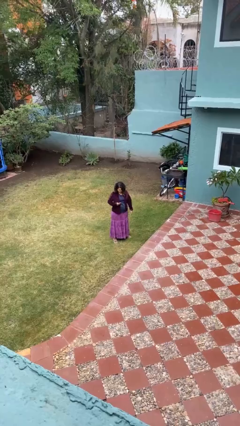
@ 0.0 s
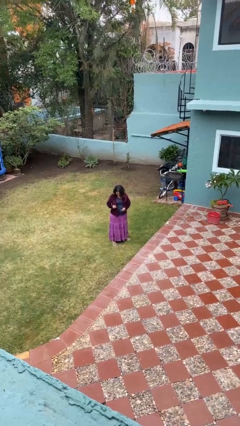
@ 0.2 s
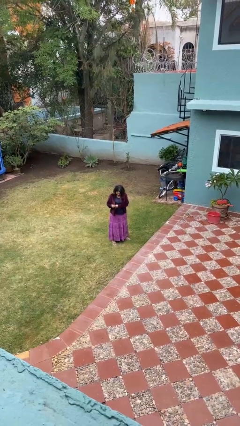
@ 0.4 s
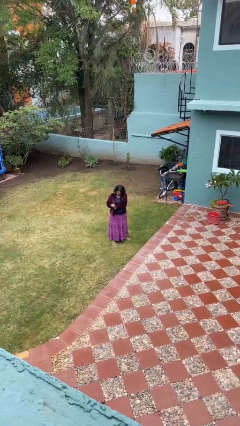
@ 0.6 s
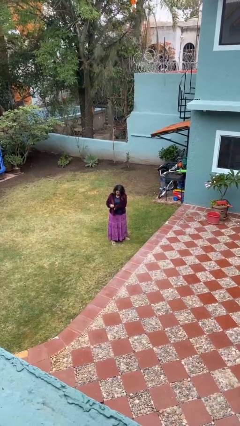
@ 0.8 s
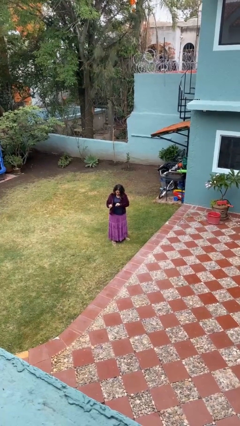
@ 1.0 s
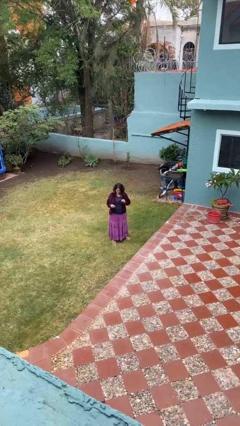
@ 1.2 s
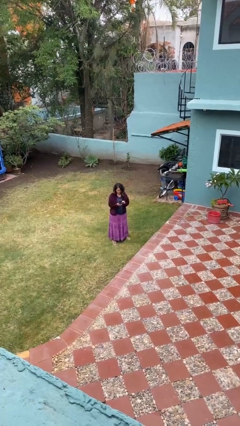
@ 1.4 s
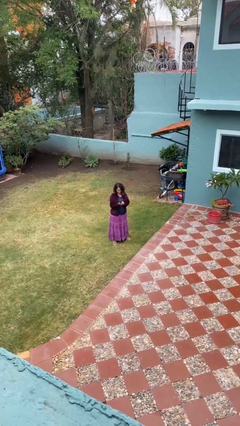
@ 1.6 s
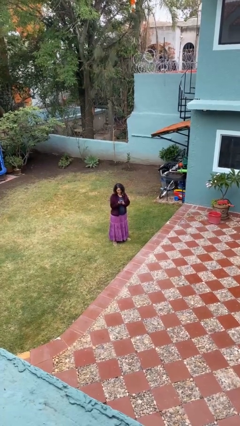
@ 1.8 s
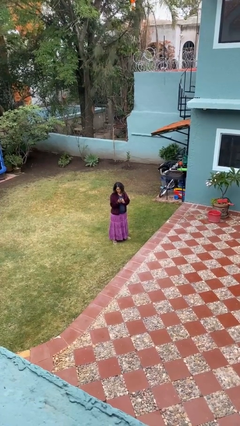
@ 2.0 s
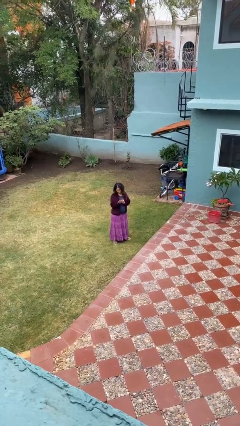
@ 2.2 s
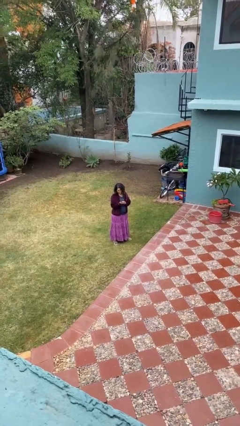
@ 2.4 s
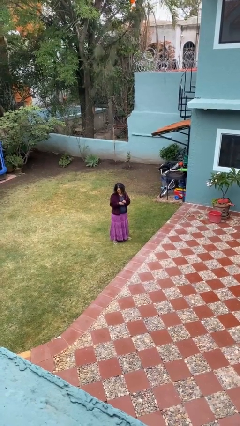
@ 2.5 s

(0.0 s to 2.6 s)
person takes phone from pocket

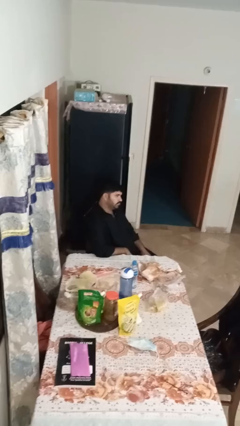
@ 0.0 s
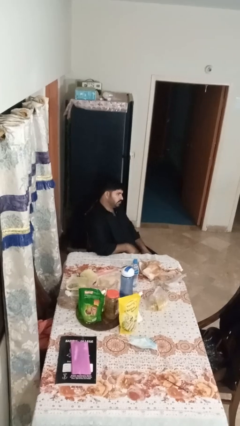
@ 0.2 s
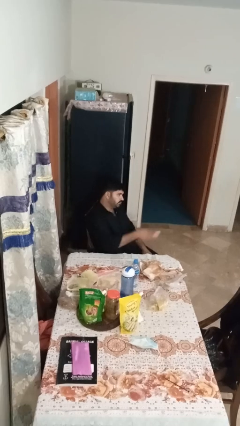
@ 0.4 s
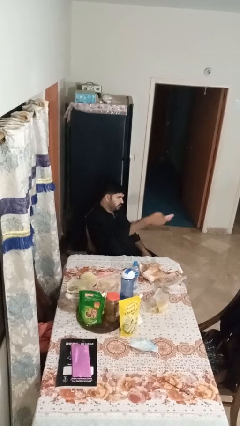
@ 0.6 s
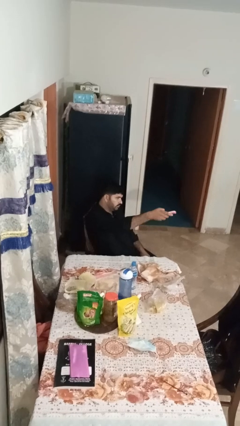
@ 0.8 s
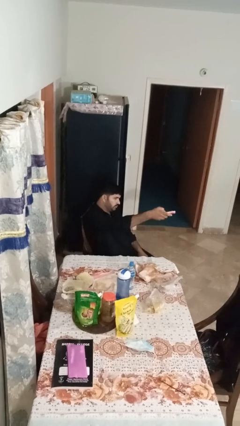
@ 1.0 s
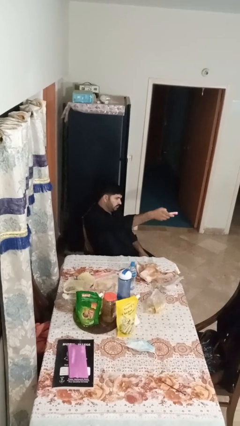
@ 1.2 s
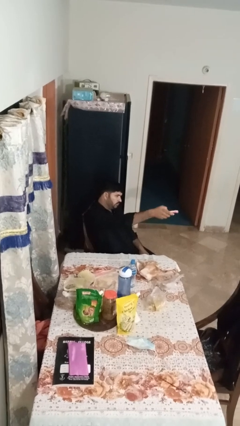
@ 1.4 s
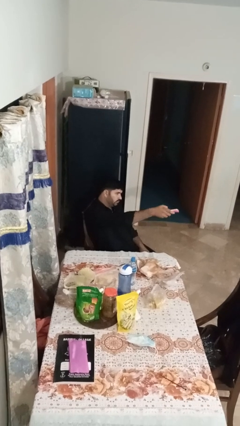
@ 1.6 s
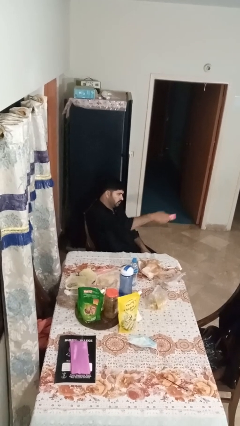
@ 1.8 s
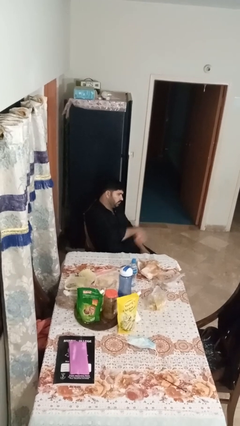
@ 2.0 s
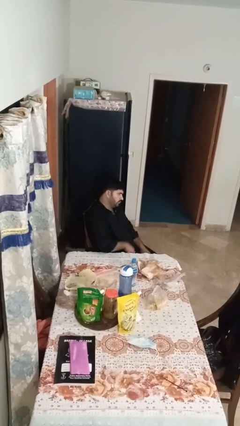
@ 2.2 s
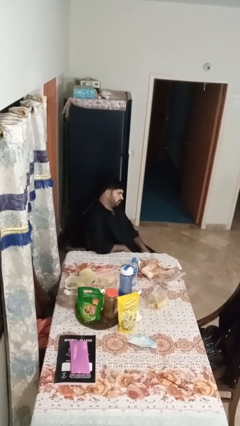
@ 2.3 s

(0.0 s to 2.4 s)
person uses television remote

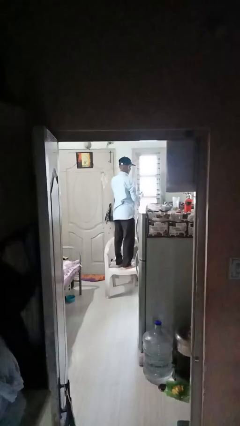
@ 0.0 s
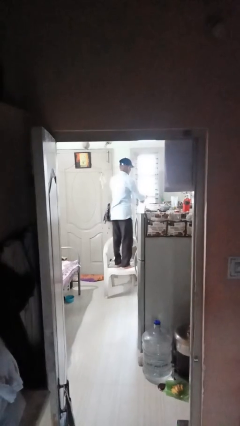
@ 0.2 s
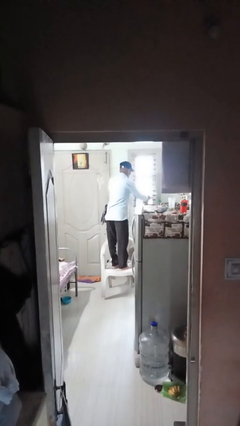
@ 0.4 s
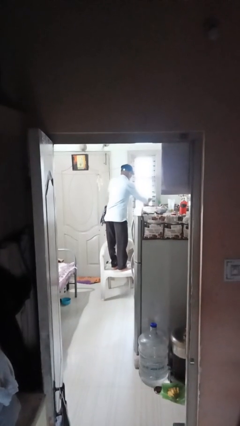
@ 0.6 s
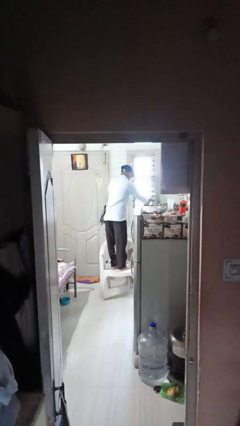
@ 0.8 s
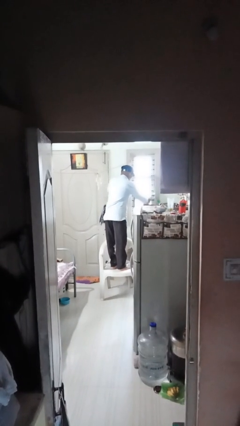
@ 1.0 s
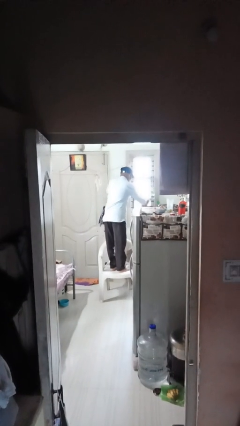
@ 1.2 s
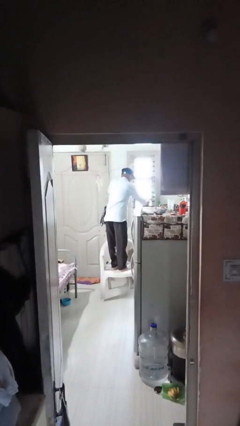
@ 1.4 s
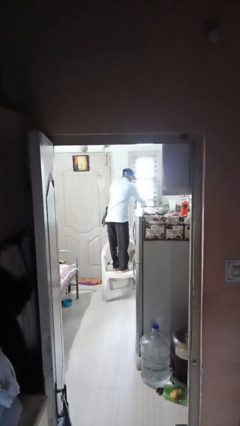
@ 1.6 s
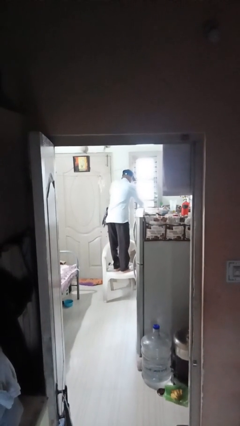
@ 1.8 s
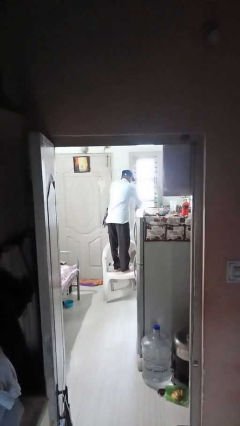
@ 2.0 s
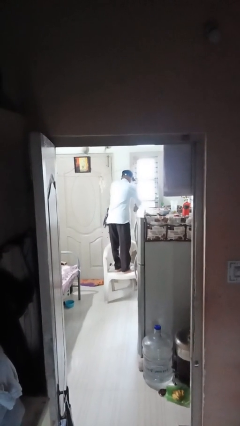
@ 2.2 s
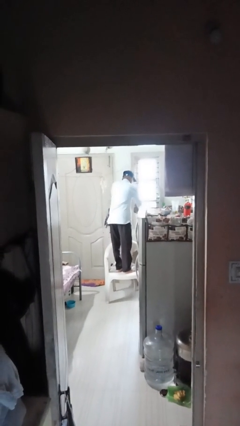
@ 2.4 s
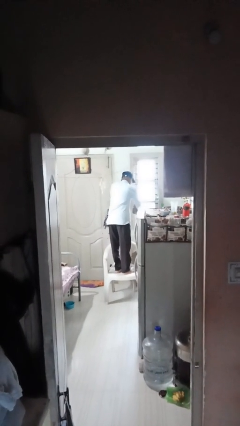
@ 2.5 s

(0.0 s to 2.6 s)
person sprays from bottle

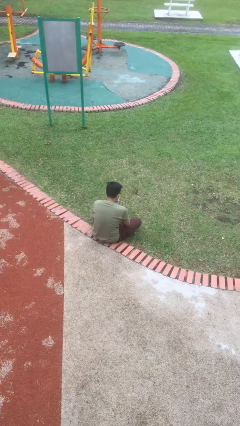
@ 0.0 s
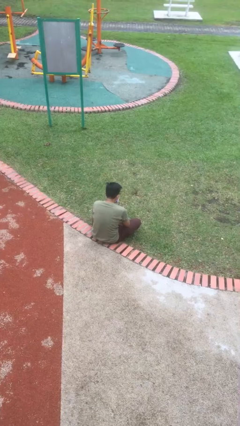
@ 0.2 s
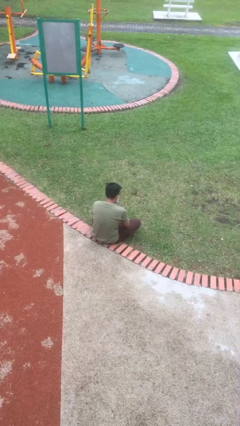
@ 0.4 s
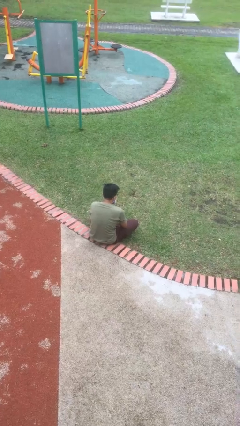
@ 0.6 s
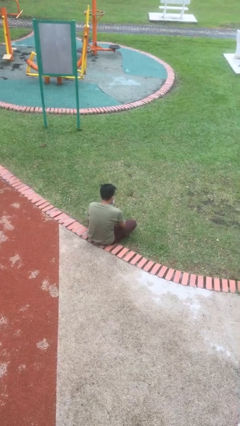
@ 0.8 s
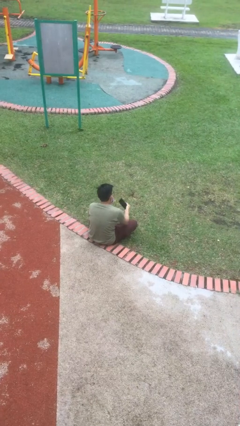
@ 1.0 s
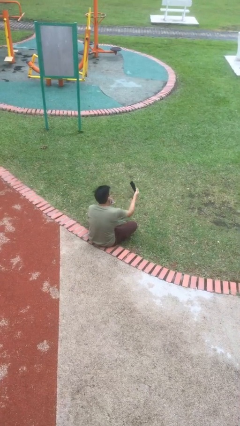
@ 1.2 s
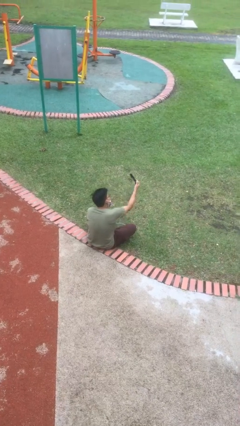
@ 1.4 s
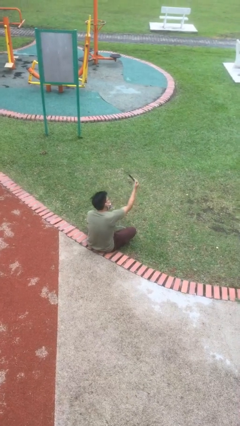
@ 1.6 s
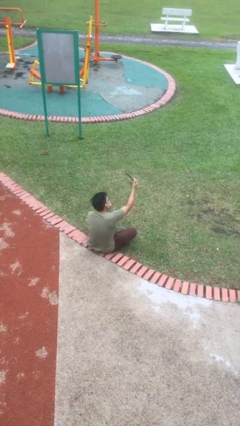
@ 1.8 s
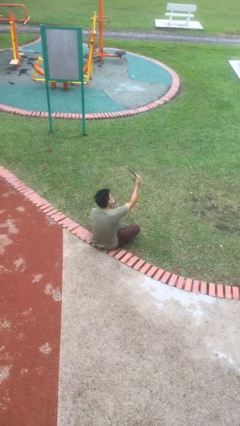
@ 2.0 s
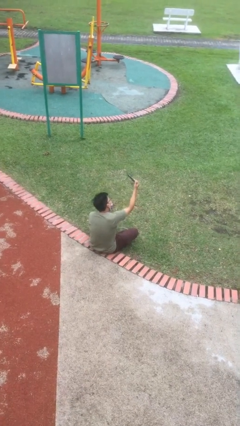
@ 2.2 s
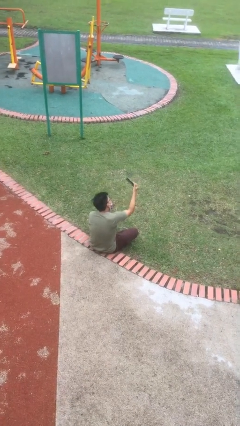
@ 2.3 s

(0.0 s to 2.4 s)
person takes selfie

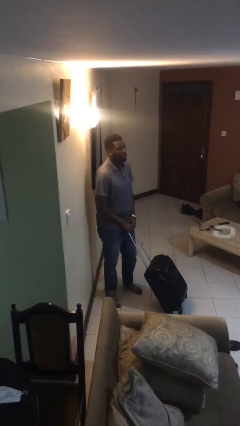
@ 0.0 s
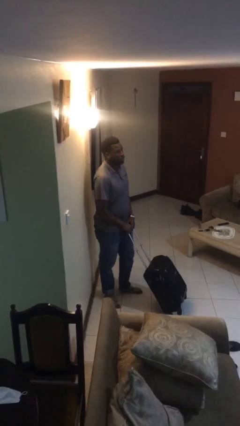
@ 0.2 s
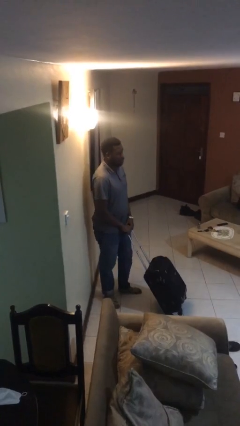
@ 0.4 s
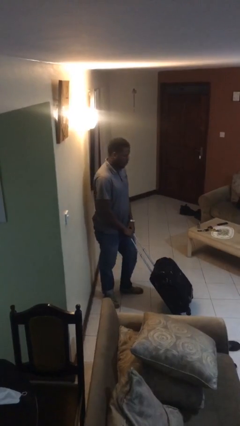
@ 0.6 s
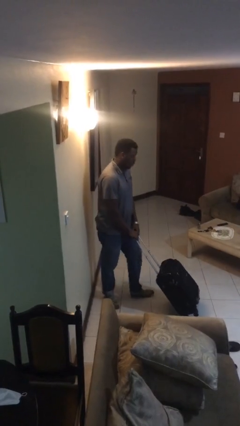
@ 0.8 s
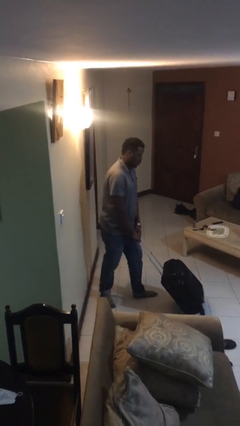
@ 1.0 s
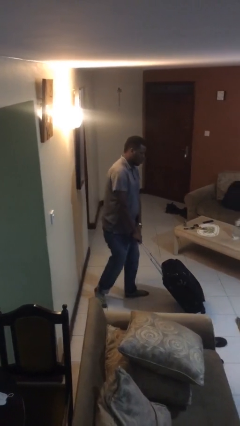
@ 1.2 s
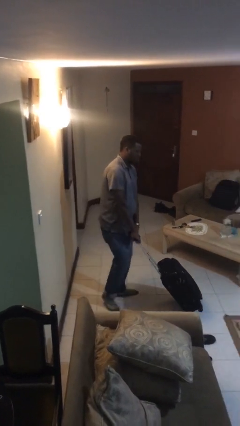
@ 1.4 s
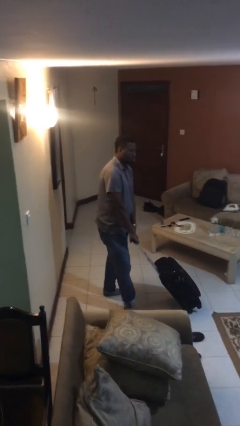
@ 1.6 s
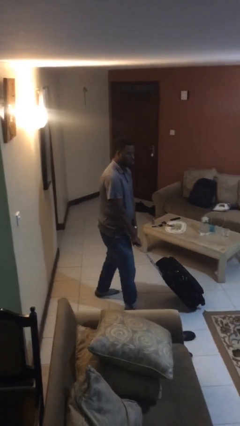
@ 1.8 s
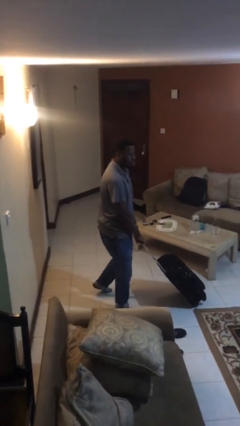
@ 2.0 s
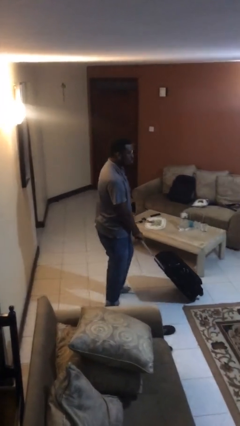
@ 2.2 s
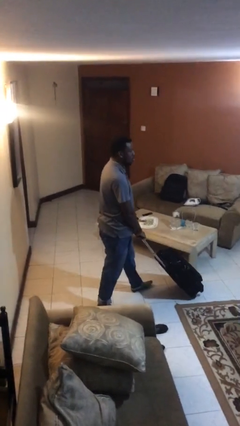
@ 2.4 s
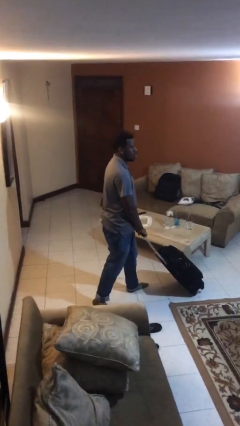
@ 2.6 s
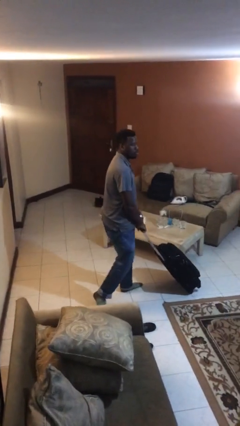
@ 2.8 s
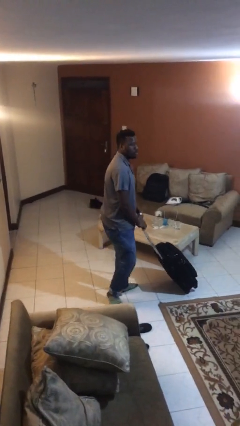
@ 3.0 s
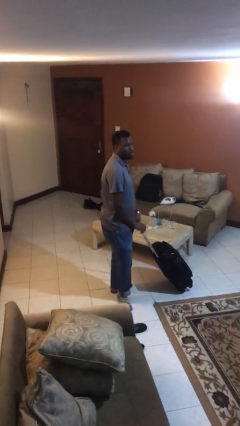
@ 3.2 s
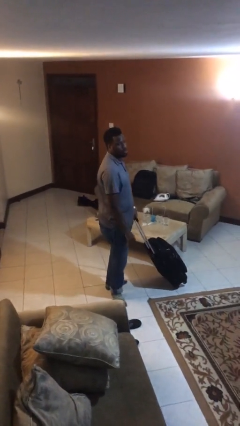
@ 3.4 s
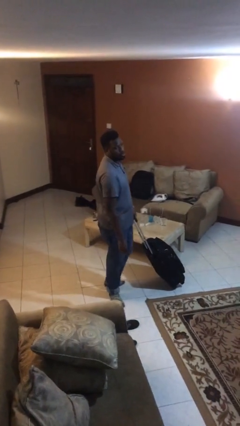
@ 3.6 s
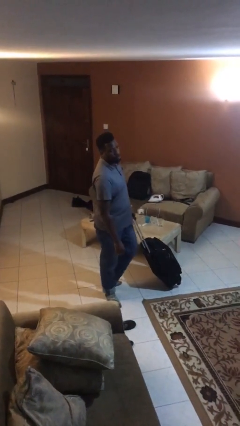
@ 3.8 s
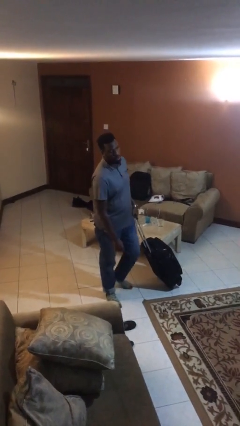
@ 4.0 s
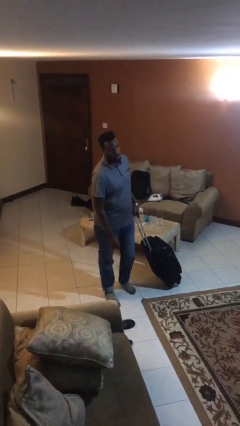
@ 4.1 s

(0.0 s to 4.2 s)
person pushes wheeled cart

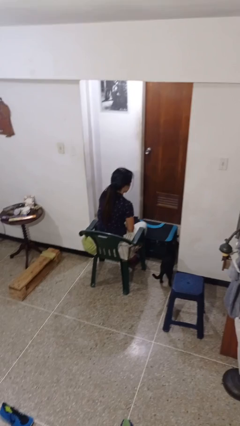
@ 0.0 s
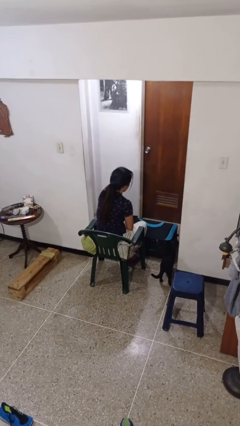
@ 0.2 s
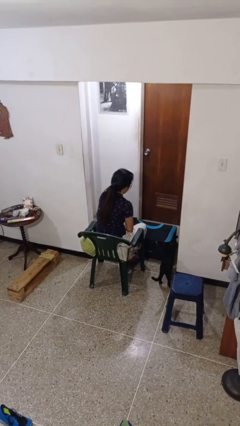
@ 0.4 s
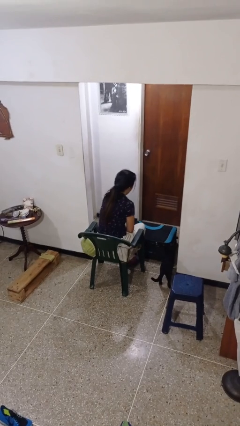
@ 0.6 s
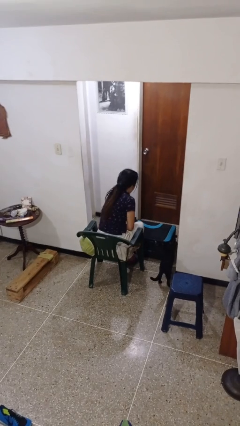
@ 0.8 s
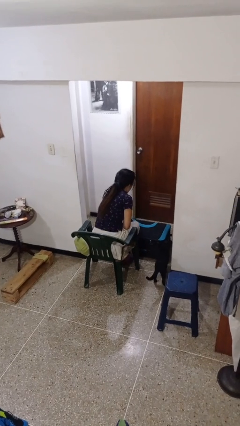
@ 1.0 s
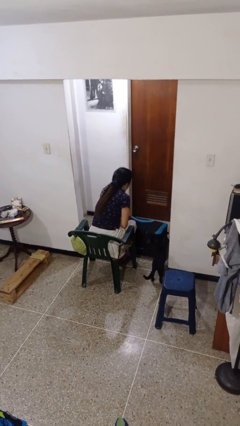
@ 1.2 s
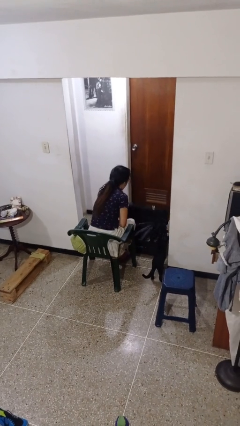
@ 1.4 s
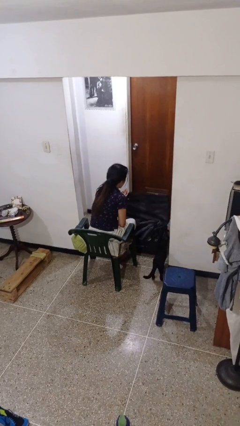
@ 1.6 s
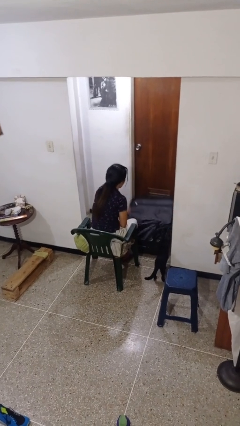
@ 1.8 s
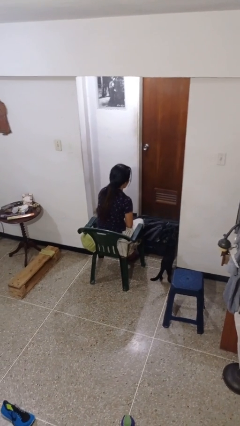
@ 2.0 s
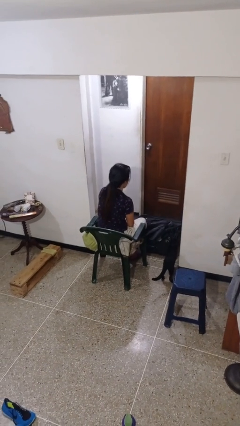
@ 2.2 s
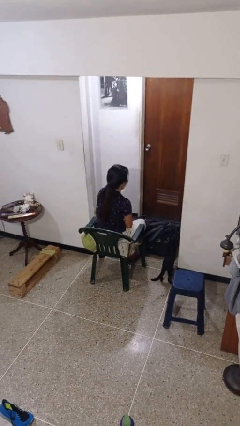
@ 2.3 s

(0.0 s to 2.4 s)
person opens suitcase

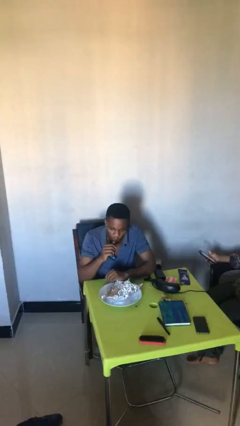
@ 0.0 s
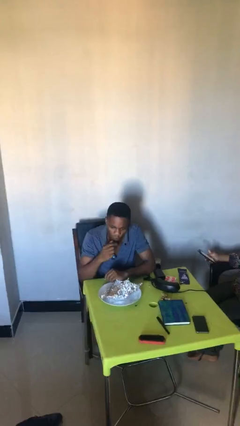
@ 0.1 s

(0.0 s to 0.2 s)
person licks fingers
